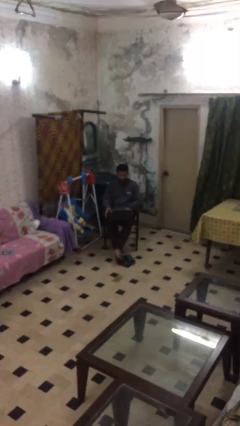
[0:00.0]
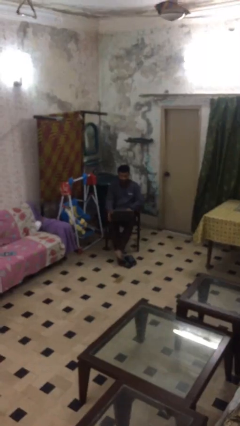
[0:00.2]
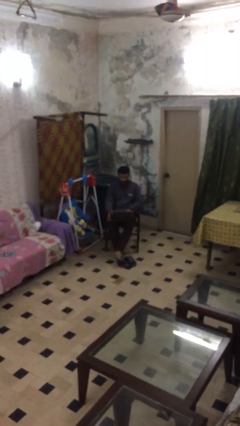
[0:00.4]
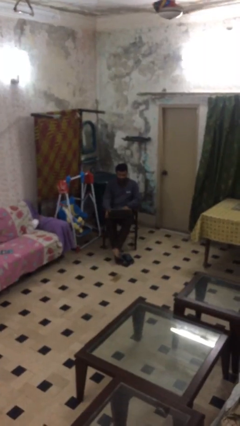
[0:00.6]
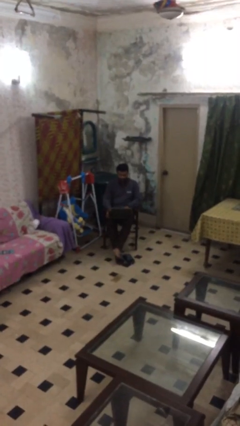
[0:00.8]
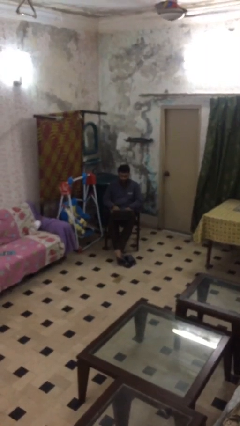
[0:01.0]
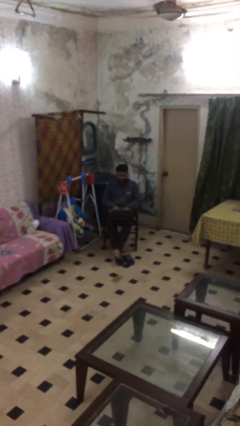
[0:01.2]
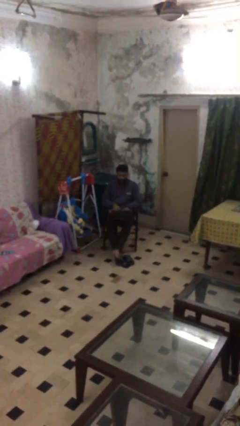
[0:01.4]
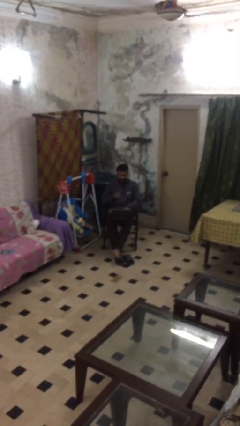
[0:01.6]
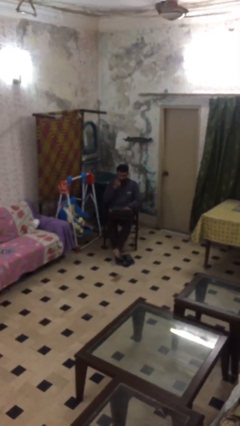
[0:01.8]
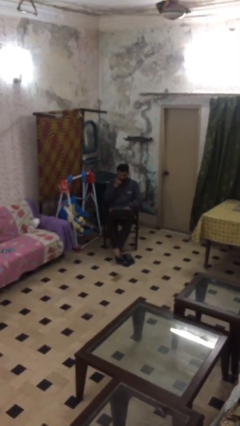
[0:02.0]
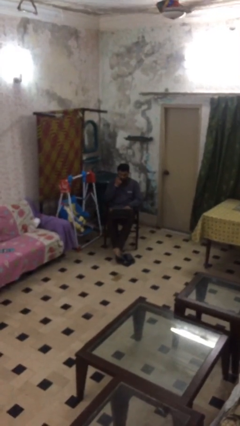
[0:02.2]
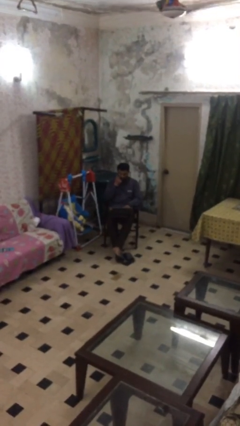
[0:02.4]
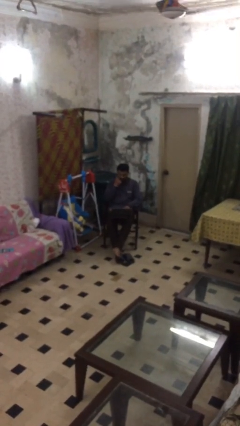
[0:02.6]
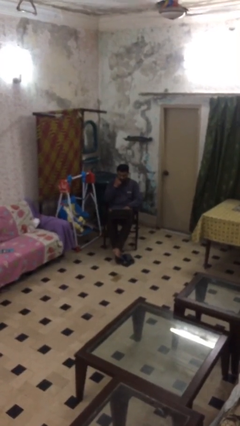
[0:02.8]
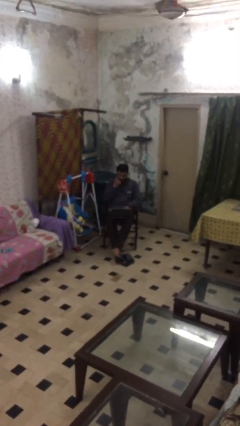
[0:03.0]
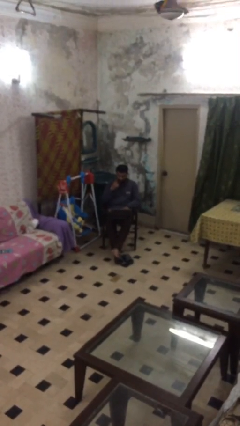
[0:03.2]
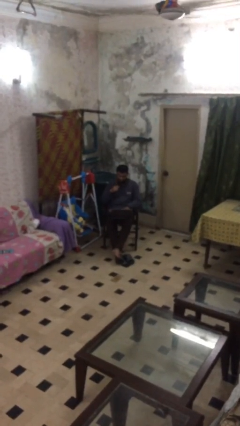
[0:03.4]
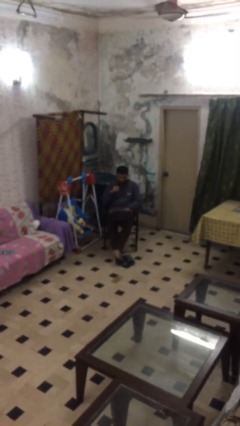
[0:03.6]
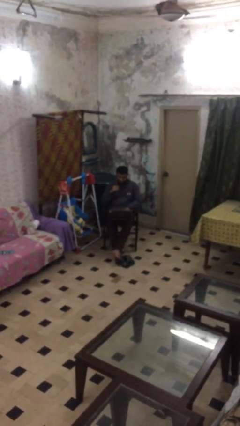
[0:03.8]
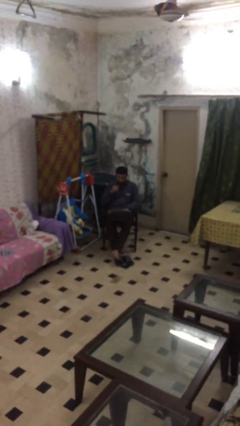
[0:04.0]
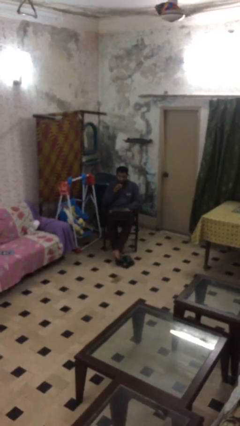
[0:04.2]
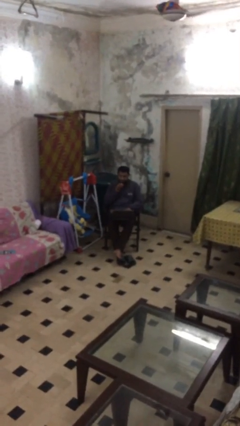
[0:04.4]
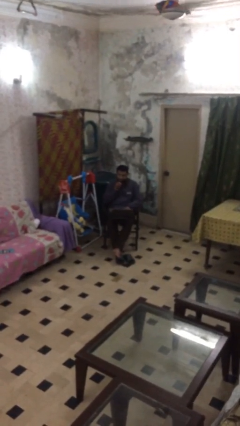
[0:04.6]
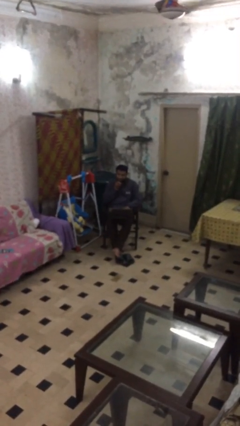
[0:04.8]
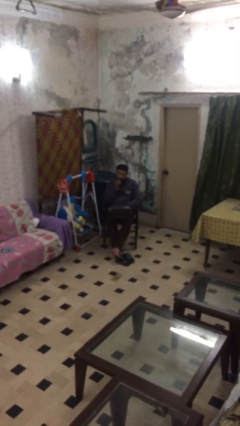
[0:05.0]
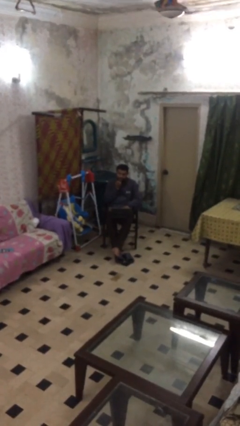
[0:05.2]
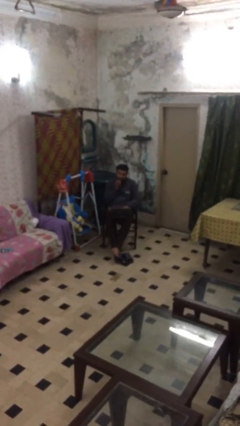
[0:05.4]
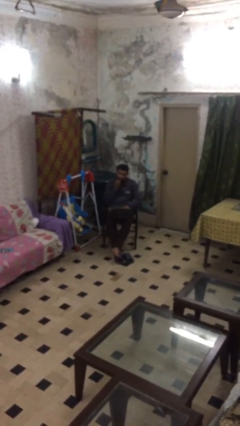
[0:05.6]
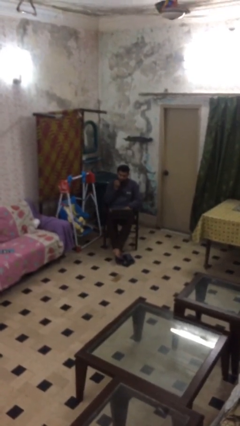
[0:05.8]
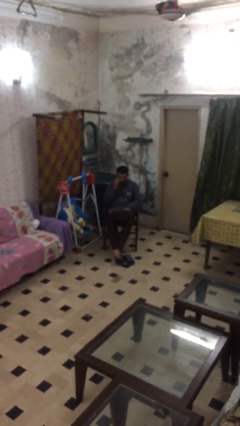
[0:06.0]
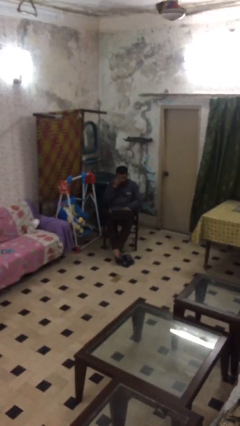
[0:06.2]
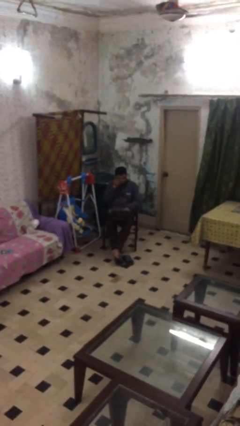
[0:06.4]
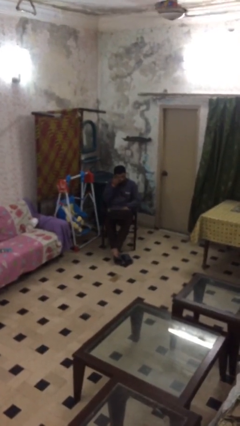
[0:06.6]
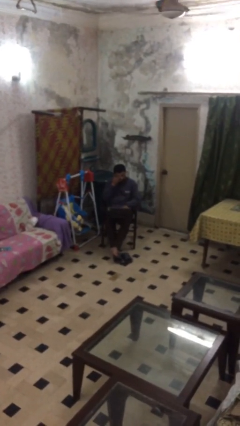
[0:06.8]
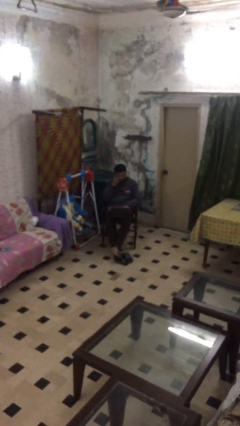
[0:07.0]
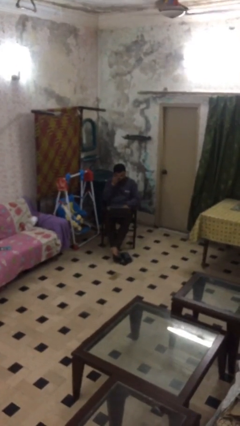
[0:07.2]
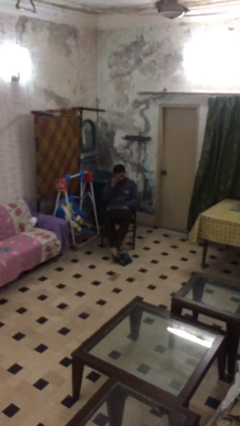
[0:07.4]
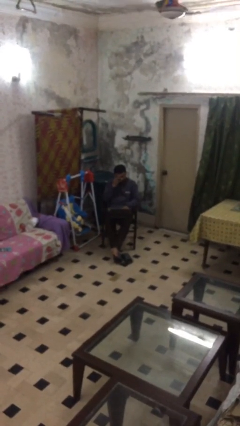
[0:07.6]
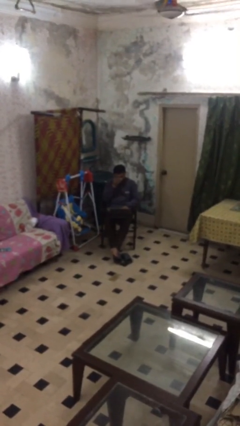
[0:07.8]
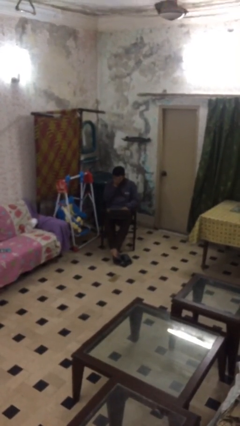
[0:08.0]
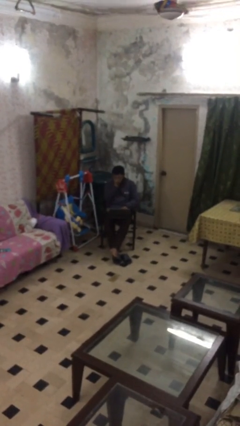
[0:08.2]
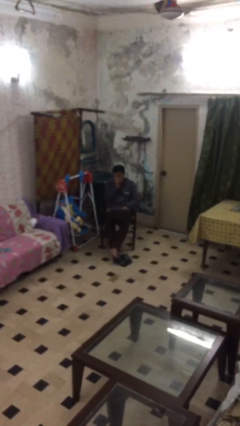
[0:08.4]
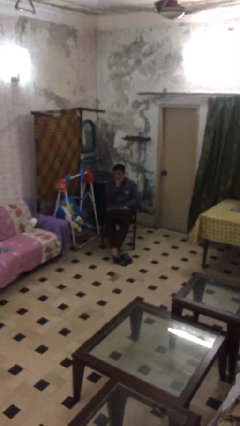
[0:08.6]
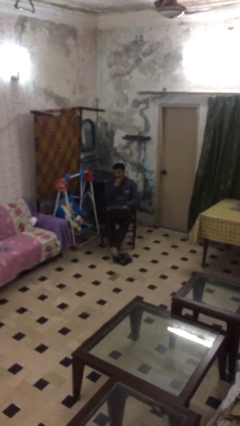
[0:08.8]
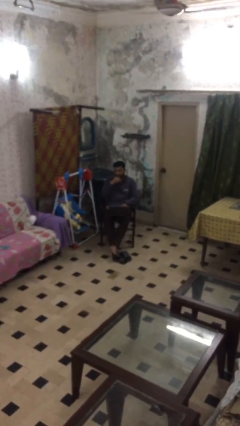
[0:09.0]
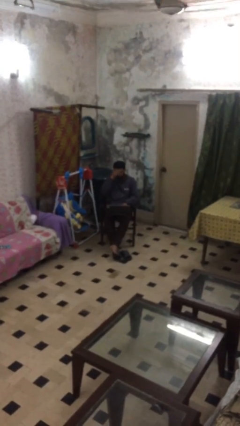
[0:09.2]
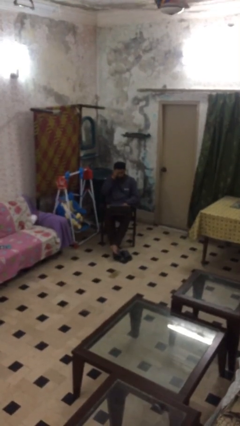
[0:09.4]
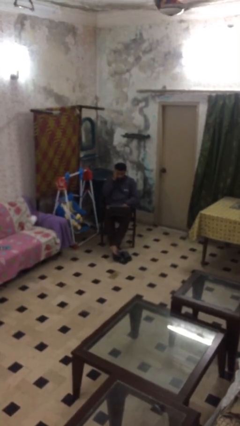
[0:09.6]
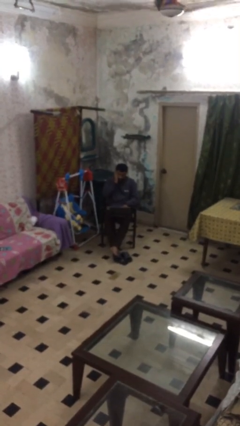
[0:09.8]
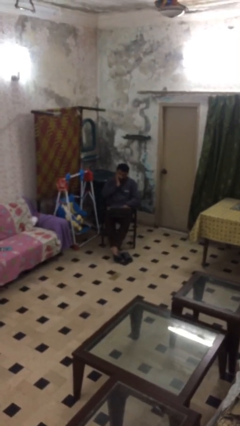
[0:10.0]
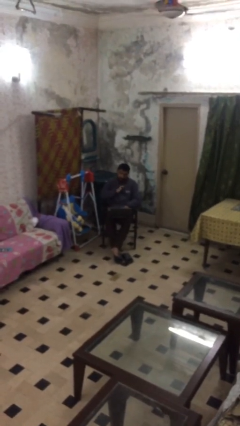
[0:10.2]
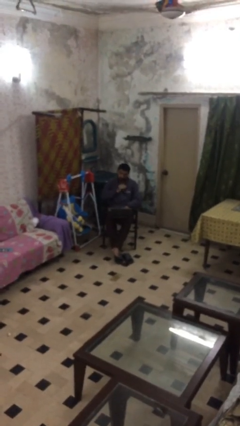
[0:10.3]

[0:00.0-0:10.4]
person interacts with laptop

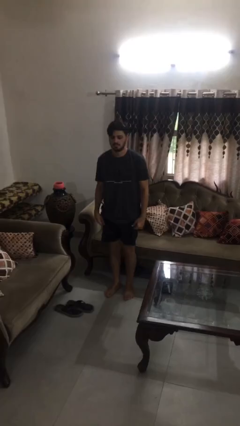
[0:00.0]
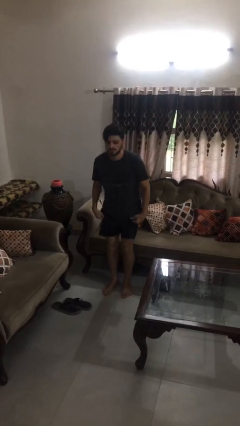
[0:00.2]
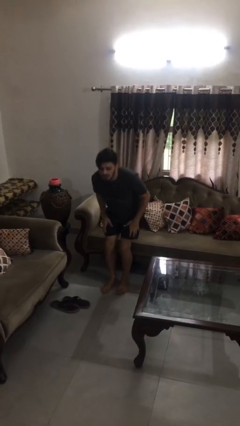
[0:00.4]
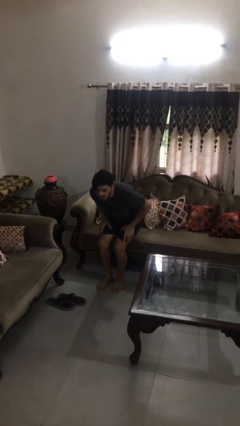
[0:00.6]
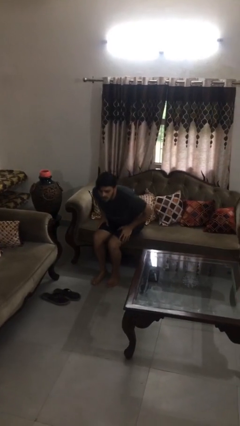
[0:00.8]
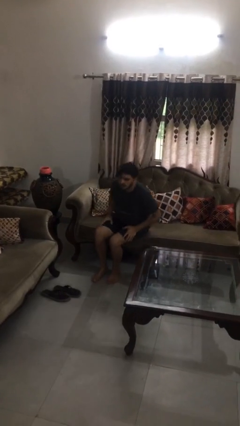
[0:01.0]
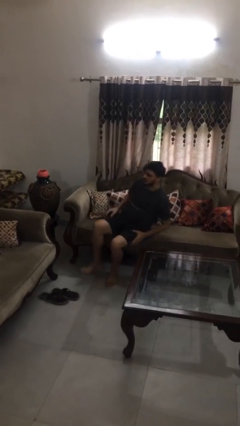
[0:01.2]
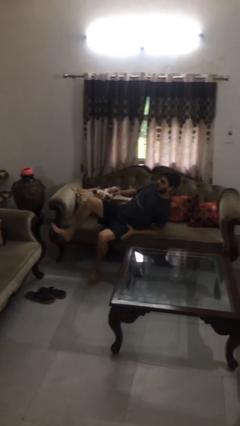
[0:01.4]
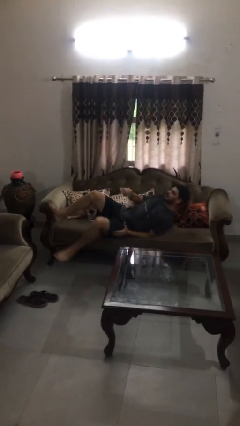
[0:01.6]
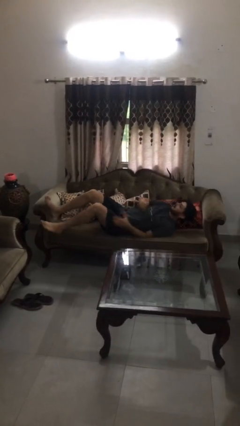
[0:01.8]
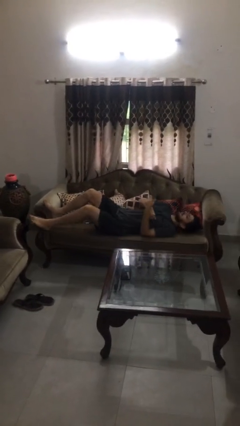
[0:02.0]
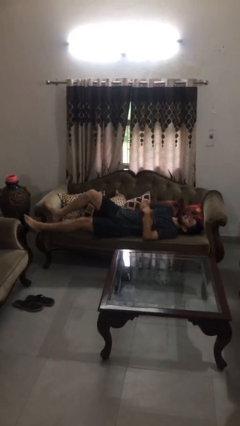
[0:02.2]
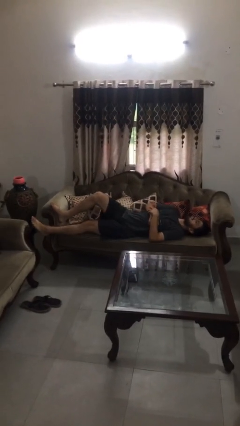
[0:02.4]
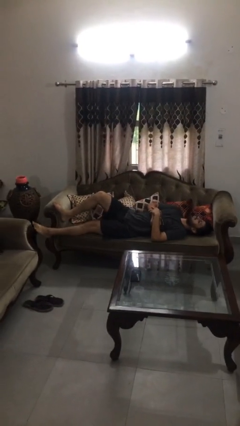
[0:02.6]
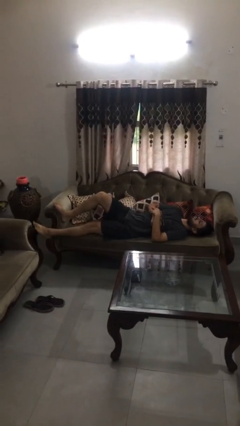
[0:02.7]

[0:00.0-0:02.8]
person lies down on couch

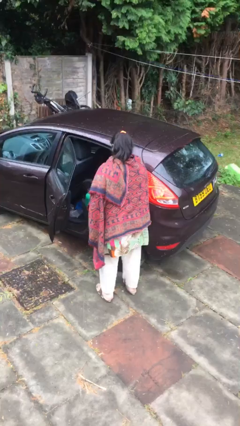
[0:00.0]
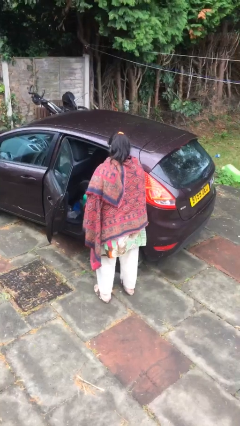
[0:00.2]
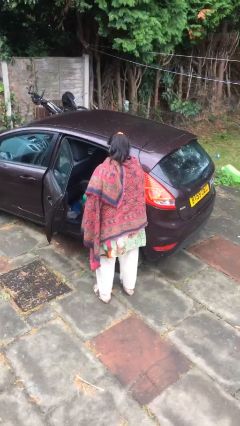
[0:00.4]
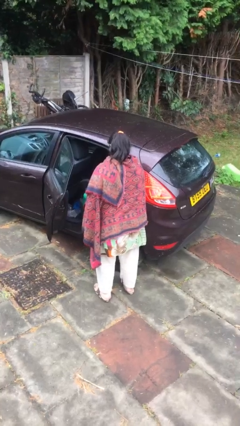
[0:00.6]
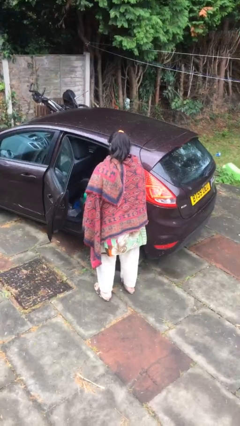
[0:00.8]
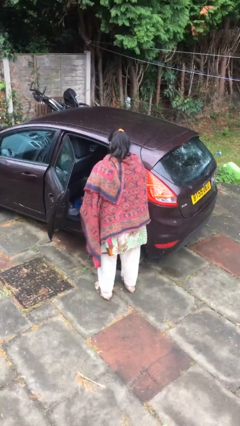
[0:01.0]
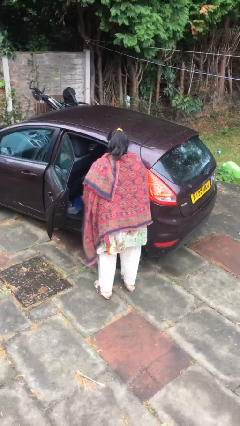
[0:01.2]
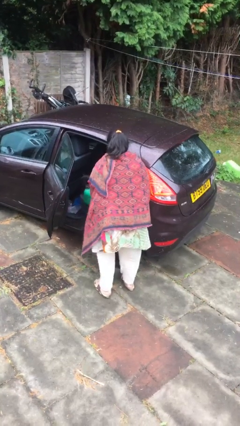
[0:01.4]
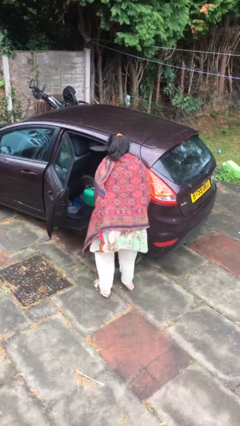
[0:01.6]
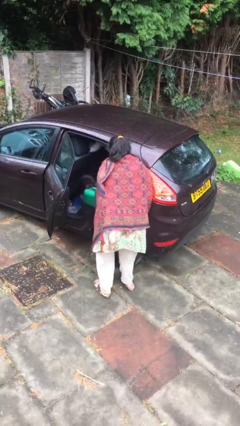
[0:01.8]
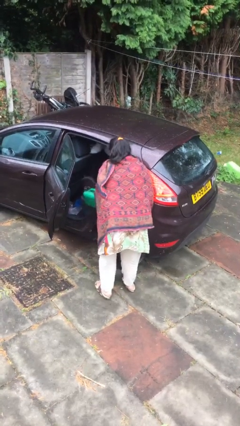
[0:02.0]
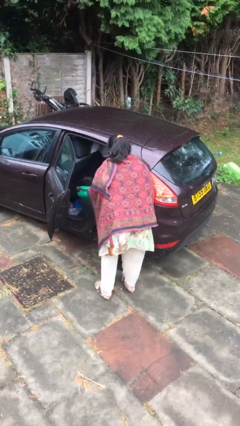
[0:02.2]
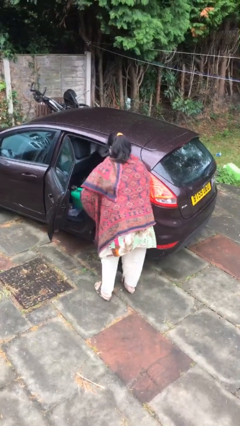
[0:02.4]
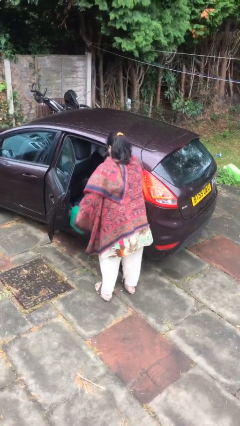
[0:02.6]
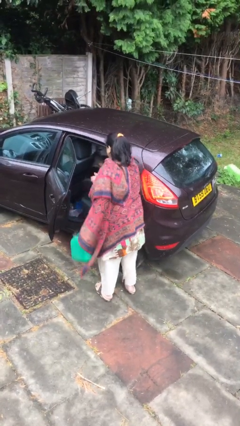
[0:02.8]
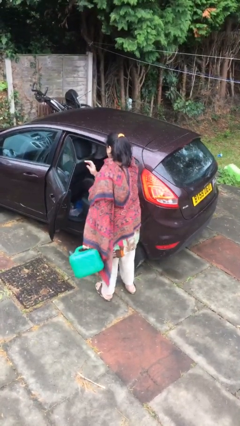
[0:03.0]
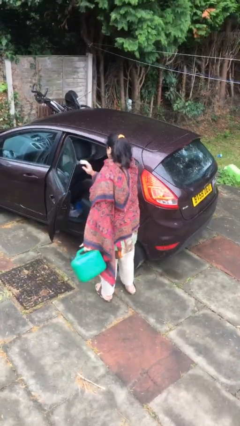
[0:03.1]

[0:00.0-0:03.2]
person unloads car

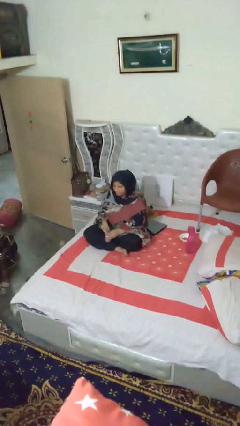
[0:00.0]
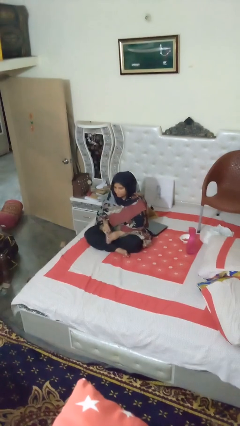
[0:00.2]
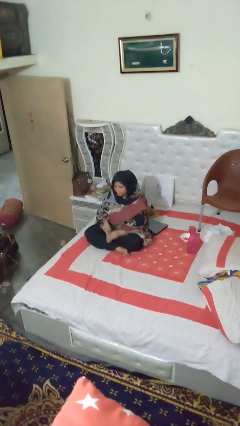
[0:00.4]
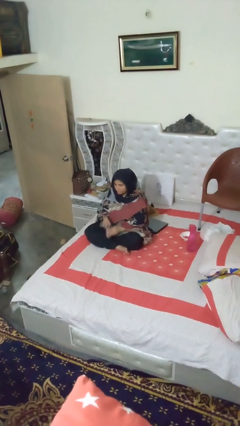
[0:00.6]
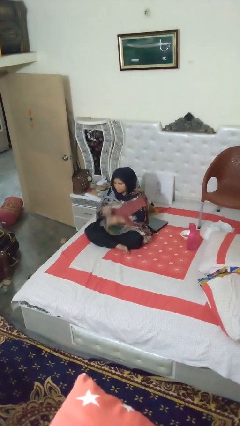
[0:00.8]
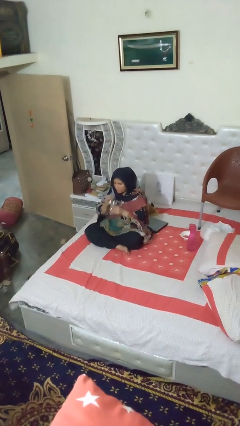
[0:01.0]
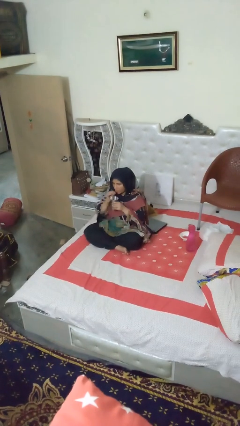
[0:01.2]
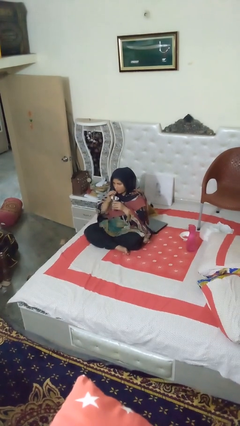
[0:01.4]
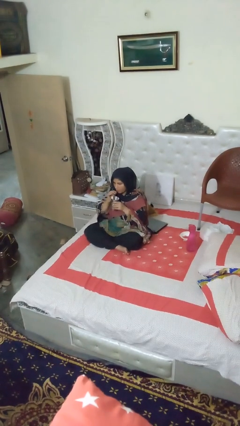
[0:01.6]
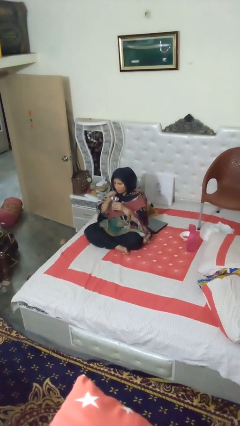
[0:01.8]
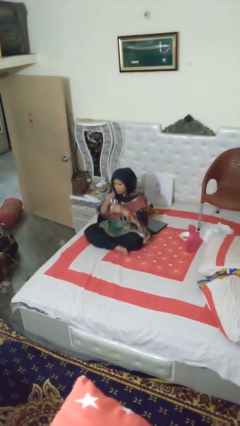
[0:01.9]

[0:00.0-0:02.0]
person drinks from straw
